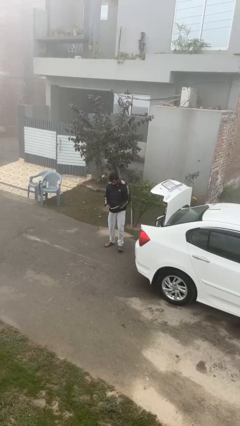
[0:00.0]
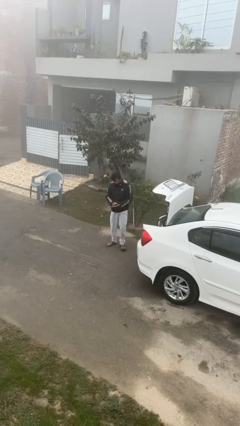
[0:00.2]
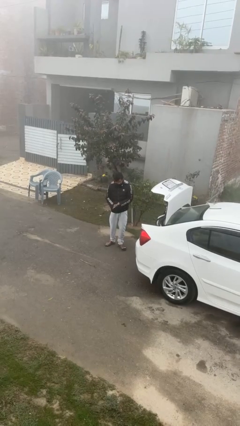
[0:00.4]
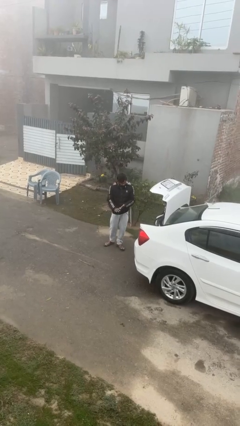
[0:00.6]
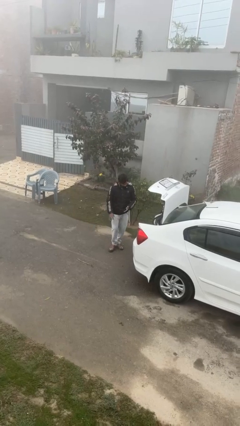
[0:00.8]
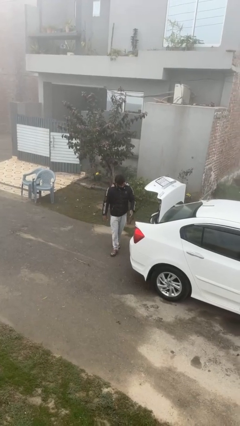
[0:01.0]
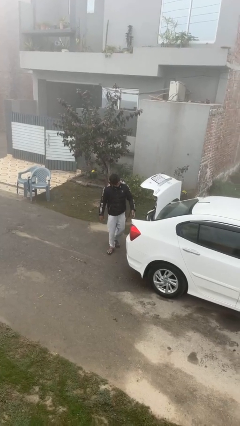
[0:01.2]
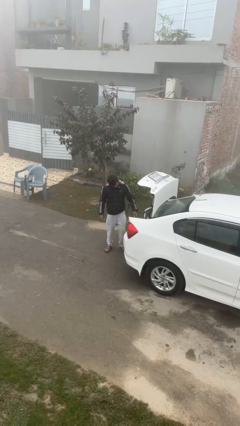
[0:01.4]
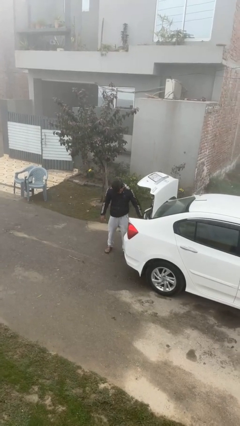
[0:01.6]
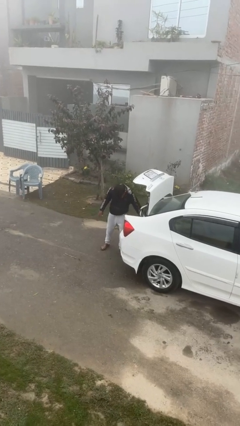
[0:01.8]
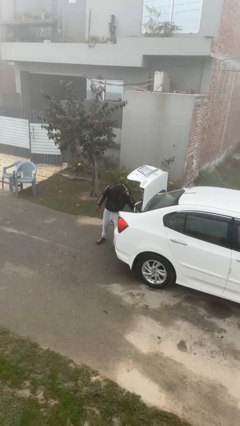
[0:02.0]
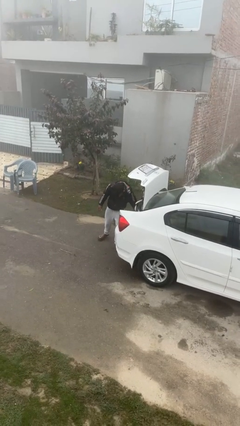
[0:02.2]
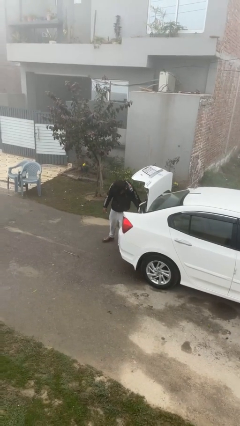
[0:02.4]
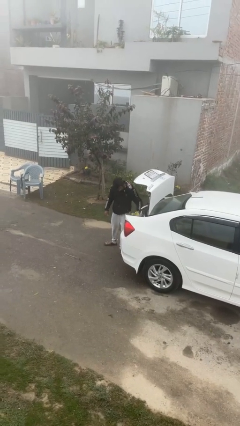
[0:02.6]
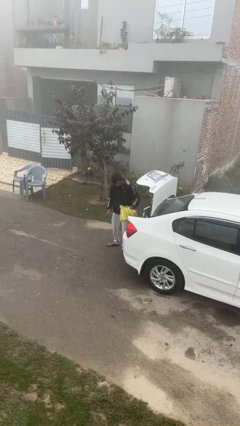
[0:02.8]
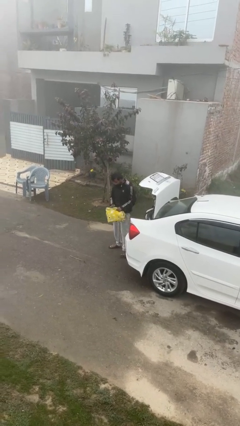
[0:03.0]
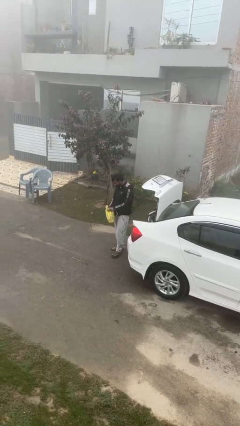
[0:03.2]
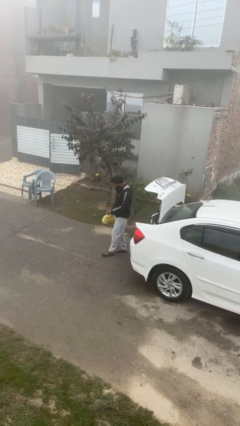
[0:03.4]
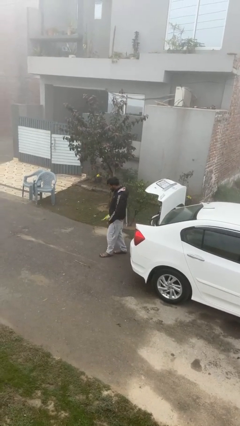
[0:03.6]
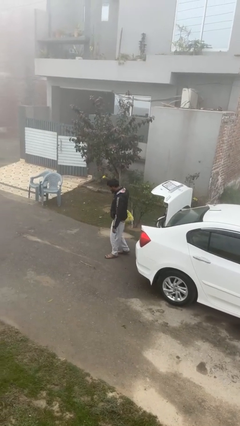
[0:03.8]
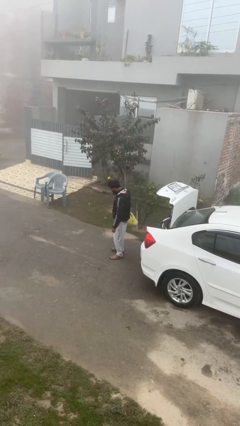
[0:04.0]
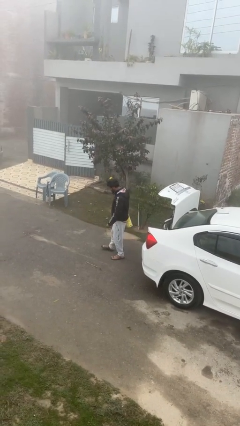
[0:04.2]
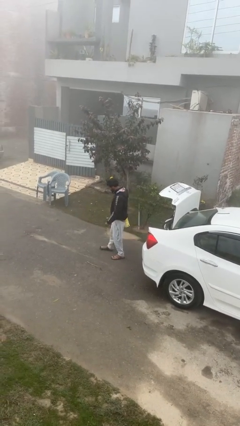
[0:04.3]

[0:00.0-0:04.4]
person unloads car

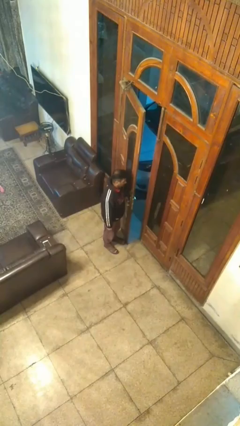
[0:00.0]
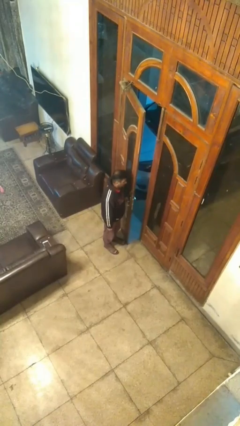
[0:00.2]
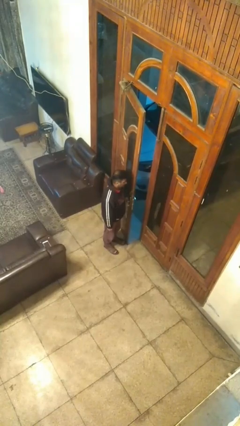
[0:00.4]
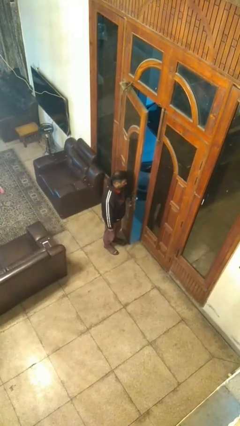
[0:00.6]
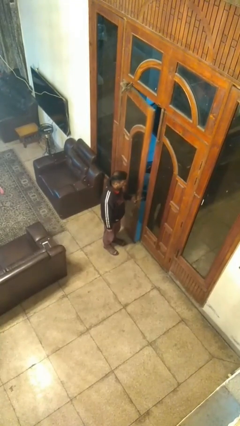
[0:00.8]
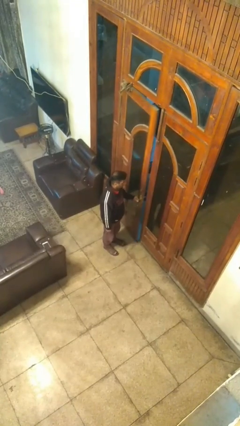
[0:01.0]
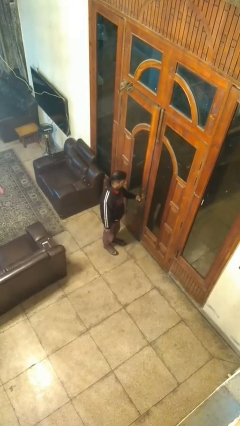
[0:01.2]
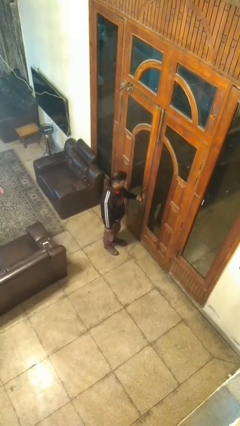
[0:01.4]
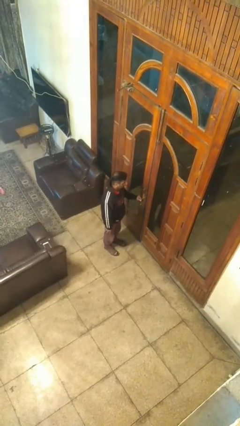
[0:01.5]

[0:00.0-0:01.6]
person closes facility door

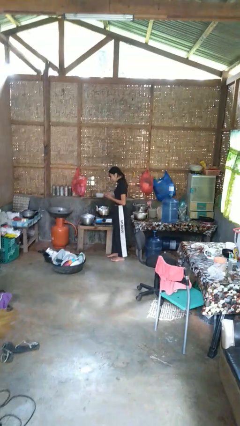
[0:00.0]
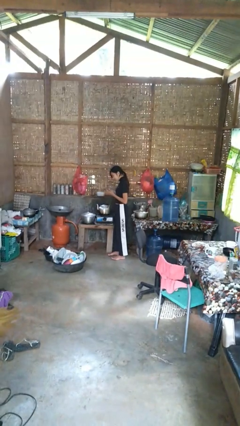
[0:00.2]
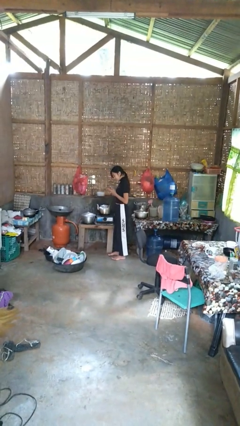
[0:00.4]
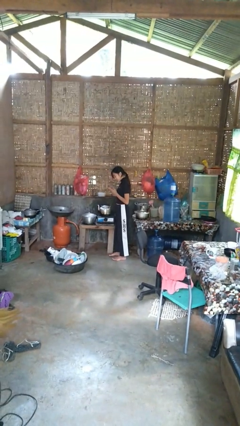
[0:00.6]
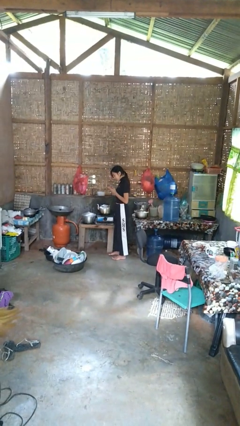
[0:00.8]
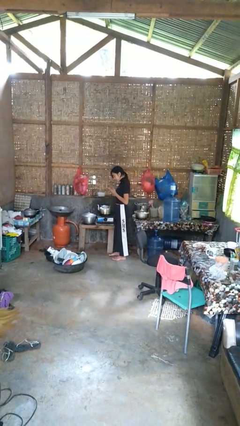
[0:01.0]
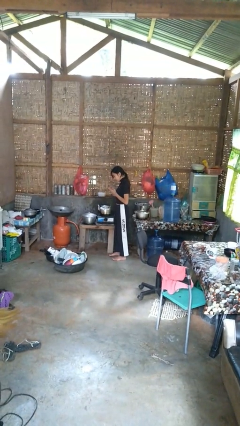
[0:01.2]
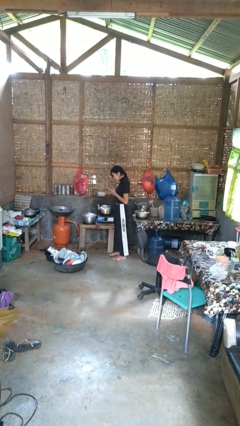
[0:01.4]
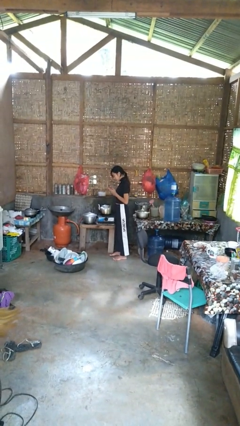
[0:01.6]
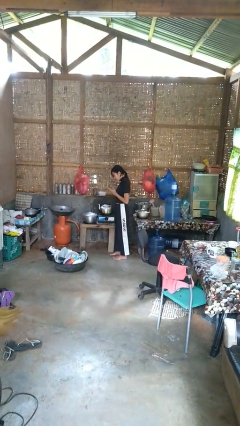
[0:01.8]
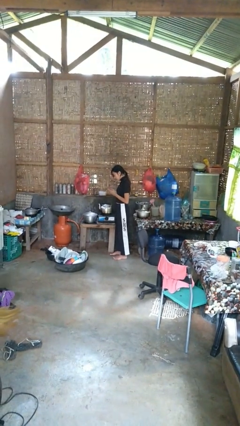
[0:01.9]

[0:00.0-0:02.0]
person burns hand

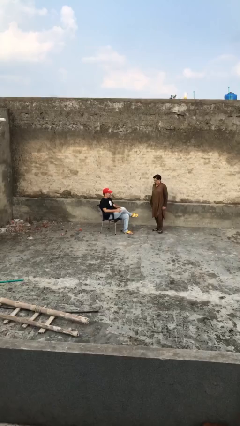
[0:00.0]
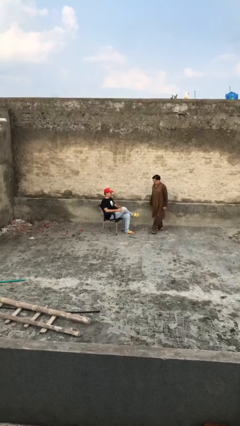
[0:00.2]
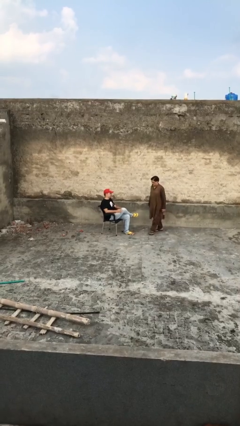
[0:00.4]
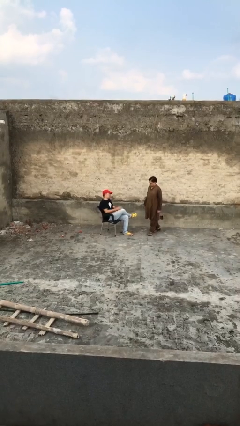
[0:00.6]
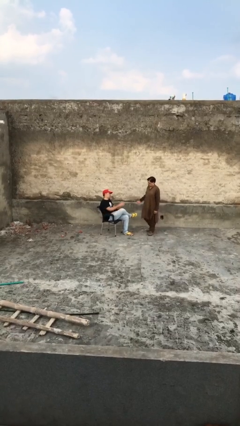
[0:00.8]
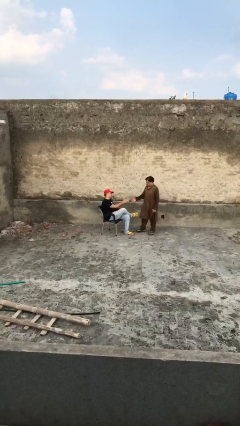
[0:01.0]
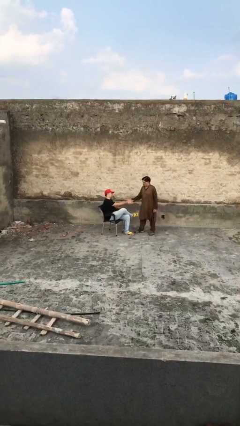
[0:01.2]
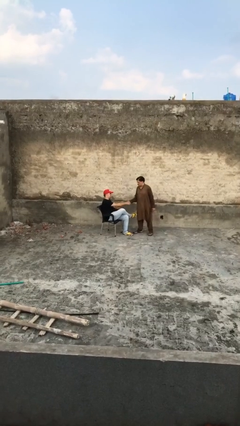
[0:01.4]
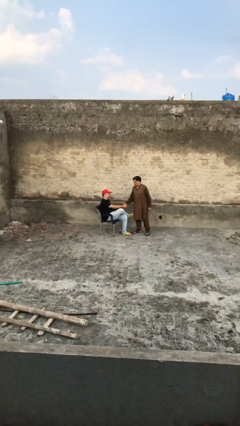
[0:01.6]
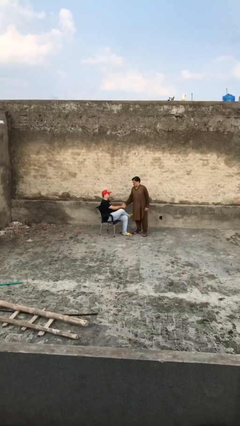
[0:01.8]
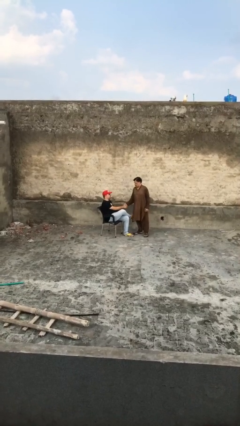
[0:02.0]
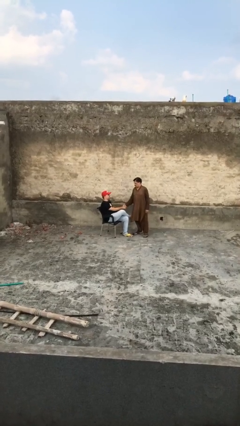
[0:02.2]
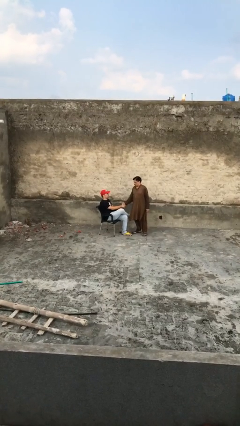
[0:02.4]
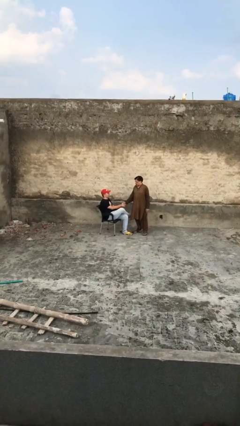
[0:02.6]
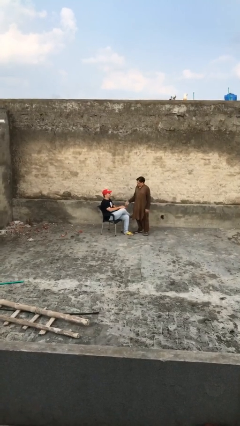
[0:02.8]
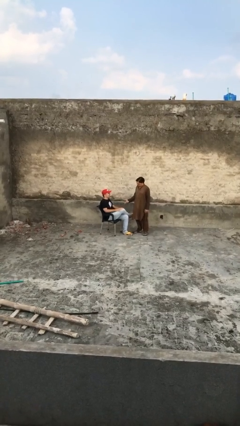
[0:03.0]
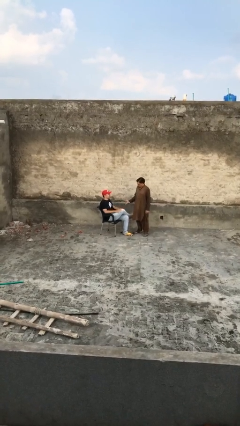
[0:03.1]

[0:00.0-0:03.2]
person shakes hand

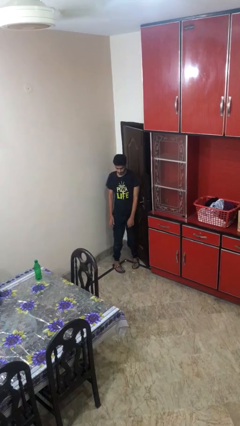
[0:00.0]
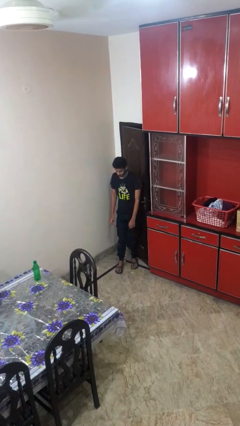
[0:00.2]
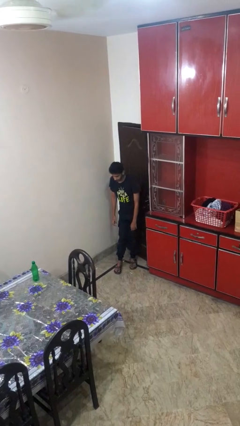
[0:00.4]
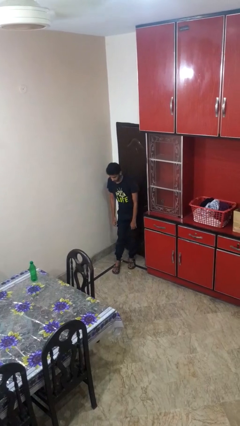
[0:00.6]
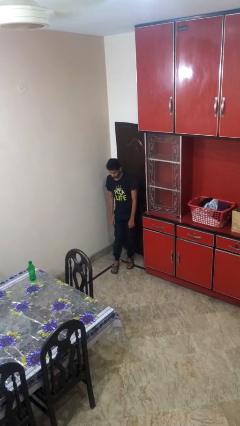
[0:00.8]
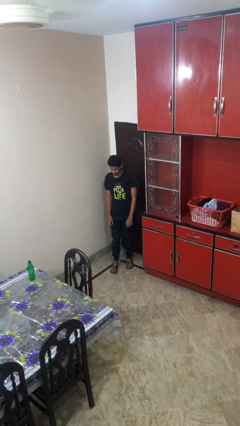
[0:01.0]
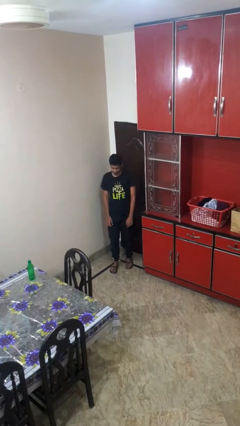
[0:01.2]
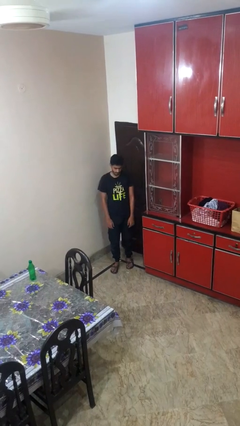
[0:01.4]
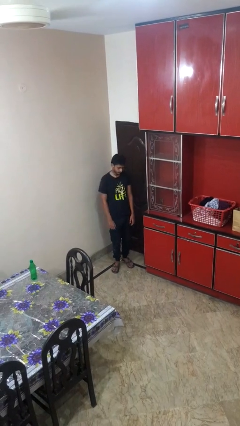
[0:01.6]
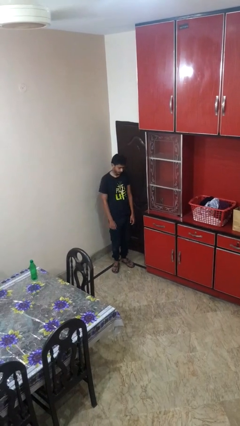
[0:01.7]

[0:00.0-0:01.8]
person closes door with hip

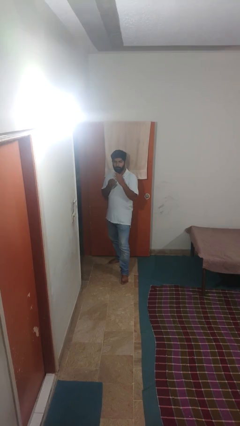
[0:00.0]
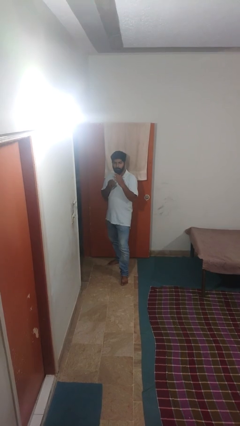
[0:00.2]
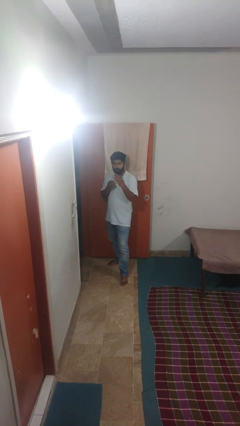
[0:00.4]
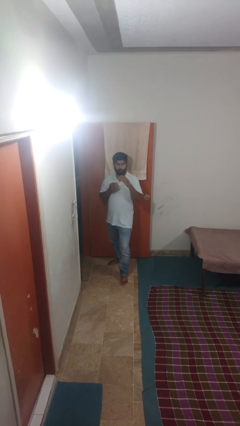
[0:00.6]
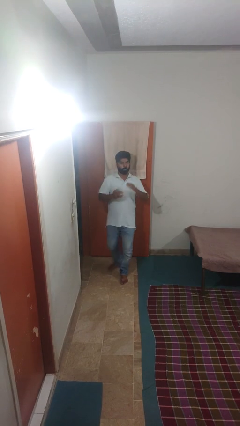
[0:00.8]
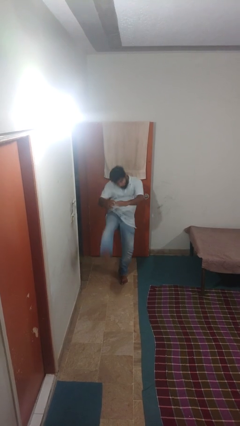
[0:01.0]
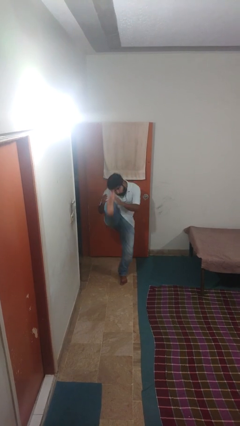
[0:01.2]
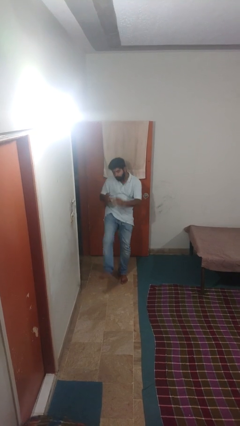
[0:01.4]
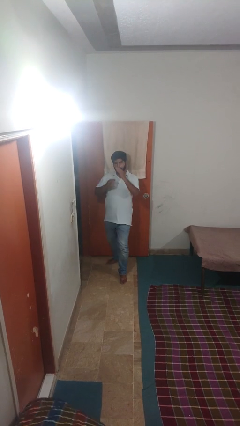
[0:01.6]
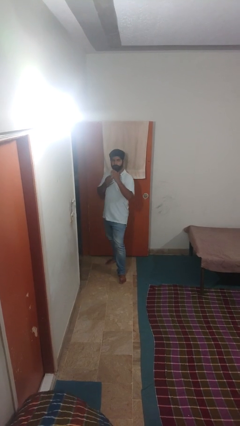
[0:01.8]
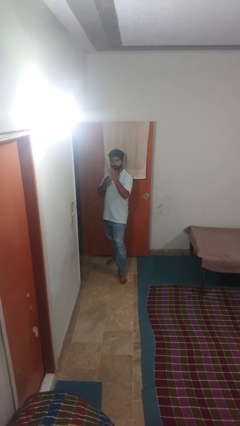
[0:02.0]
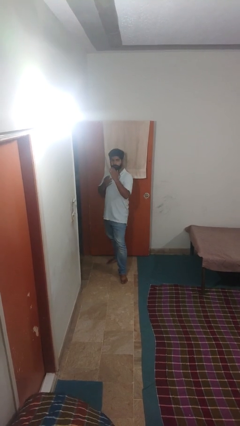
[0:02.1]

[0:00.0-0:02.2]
person karate kicks

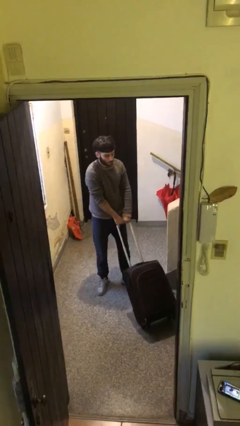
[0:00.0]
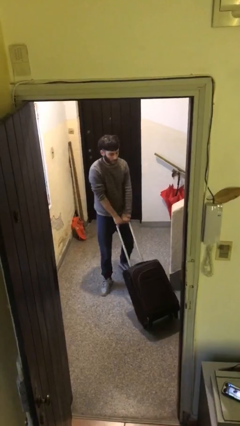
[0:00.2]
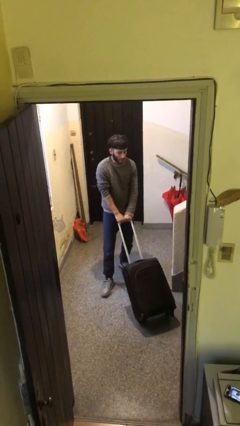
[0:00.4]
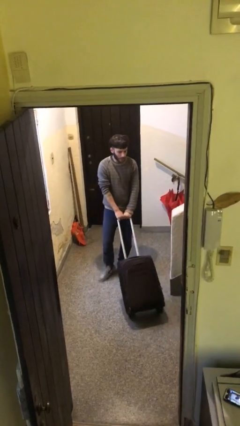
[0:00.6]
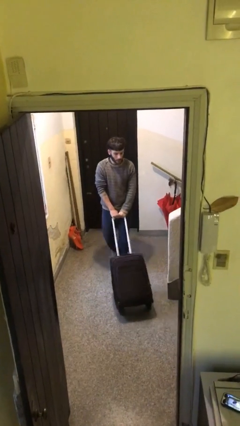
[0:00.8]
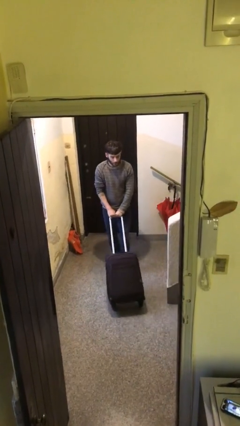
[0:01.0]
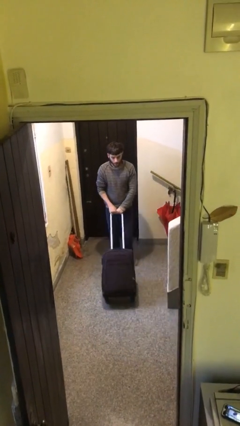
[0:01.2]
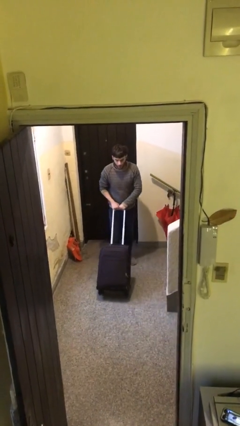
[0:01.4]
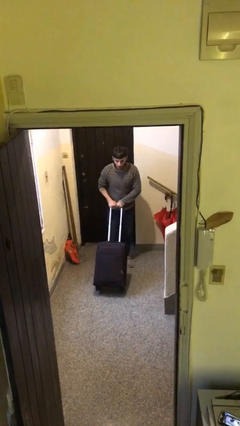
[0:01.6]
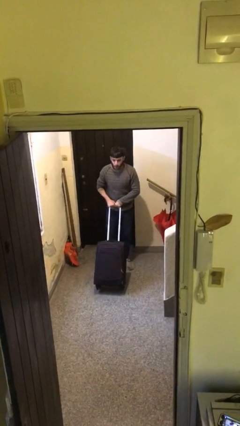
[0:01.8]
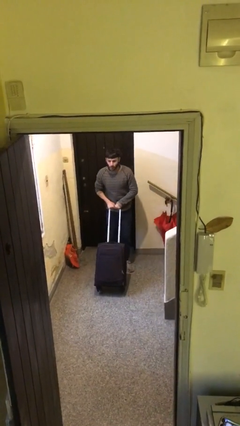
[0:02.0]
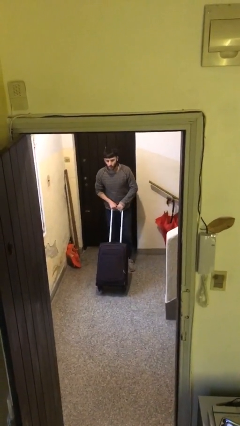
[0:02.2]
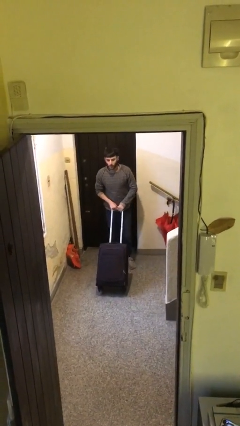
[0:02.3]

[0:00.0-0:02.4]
person pulls wheeled cart
